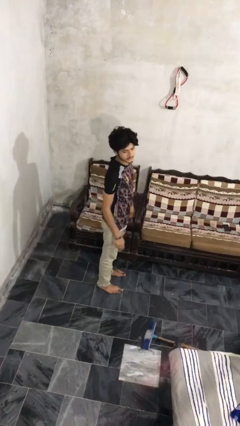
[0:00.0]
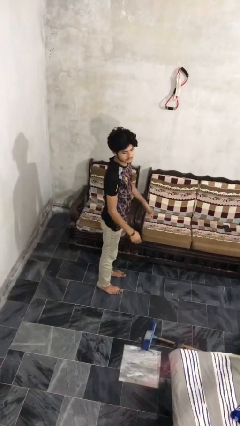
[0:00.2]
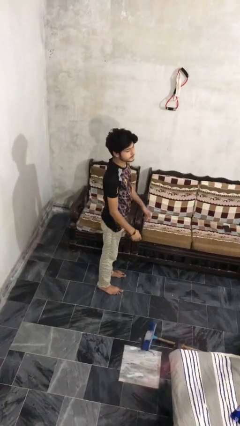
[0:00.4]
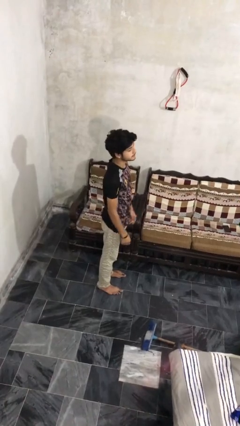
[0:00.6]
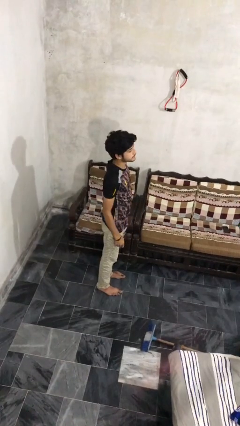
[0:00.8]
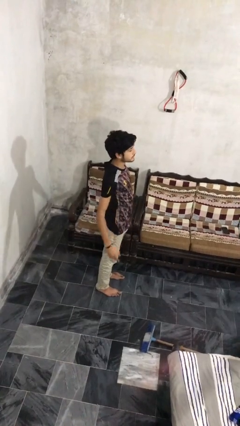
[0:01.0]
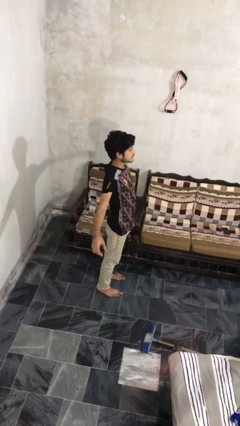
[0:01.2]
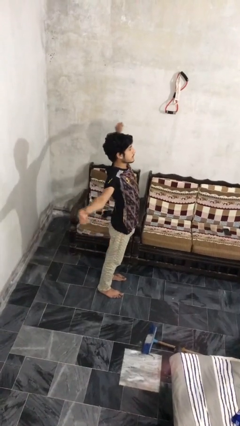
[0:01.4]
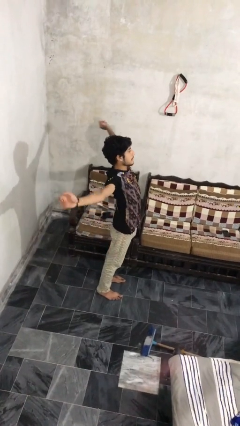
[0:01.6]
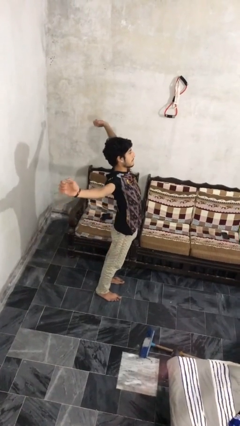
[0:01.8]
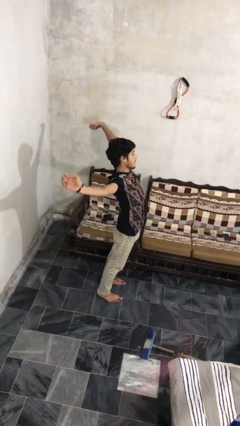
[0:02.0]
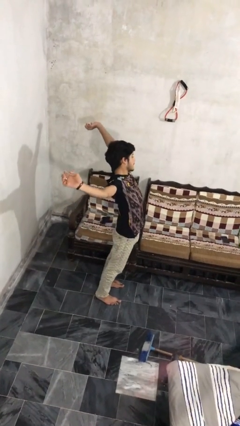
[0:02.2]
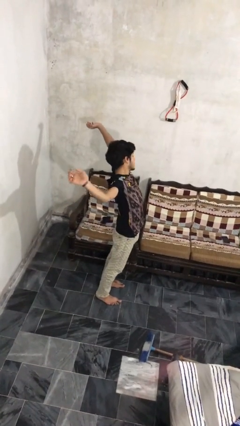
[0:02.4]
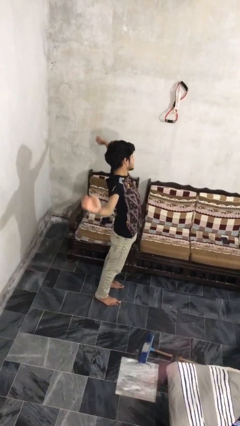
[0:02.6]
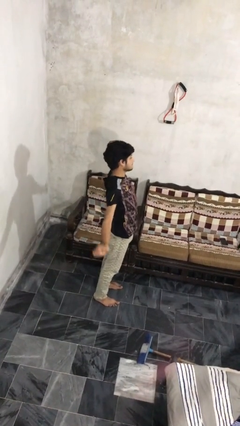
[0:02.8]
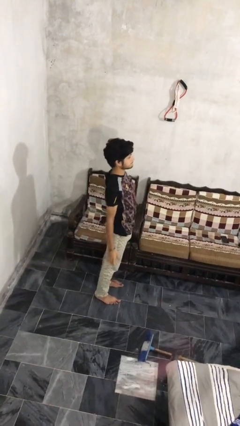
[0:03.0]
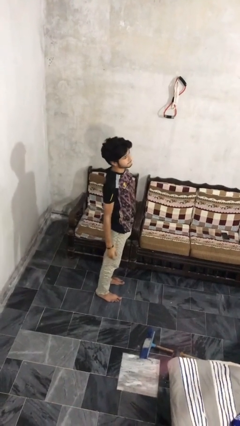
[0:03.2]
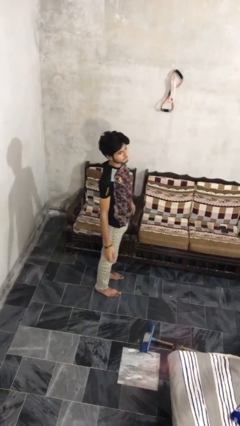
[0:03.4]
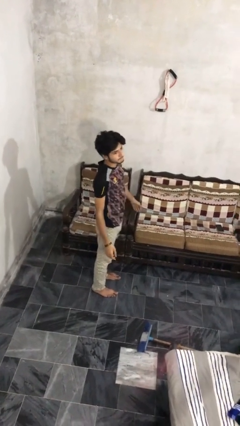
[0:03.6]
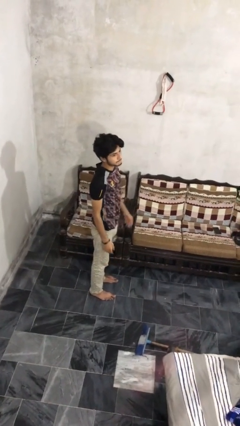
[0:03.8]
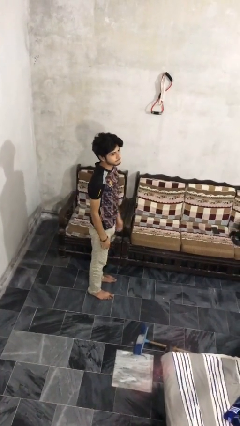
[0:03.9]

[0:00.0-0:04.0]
person stretches arms to side

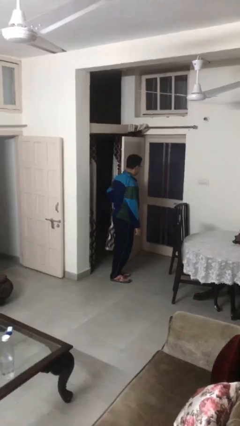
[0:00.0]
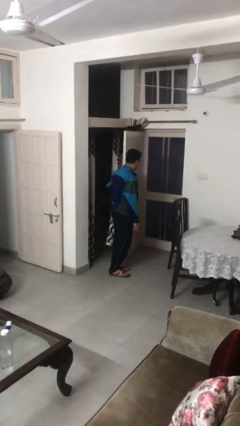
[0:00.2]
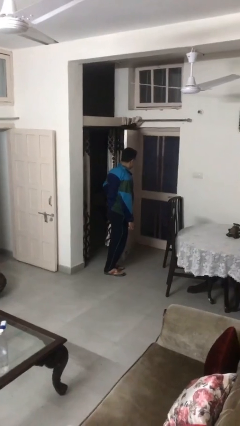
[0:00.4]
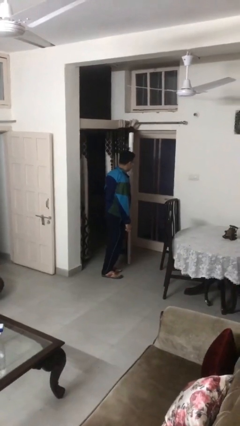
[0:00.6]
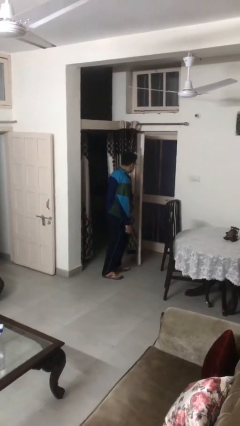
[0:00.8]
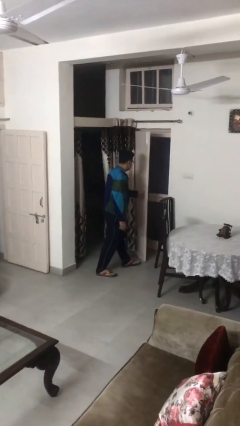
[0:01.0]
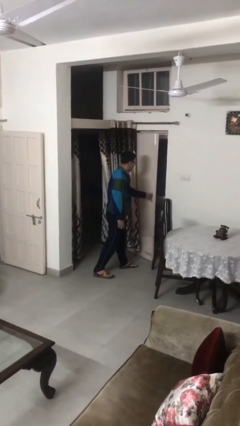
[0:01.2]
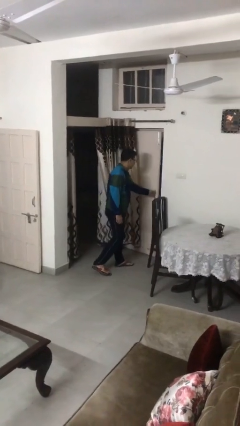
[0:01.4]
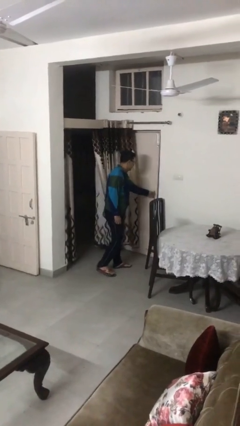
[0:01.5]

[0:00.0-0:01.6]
person closes facility door

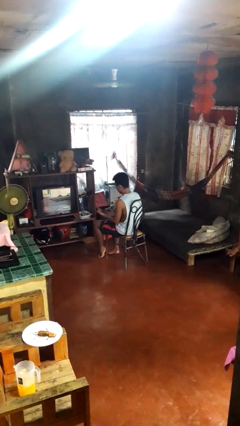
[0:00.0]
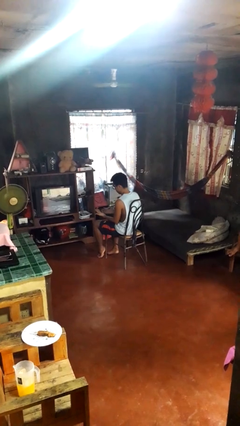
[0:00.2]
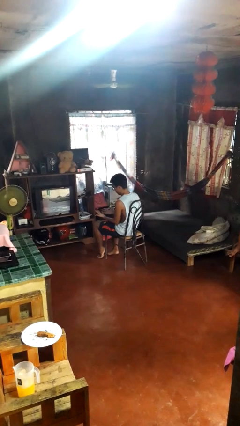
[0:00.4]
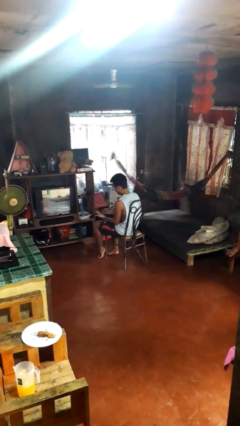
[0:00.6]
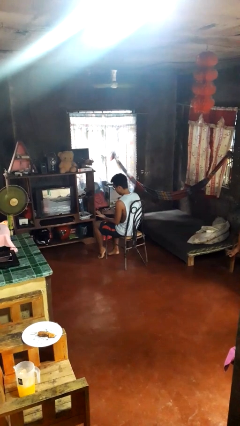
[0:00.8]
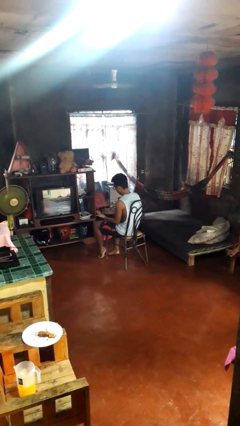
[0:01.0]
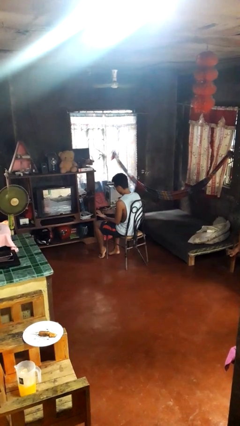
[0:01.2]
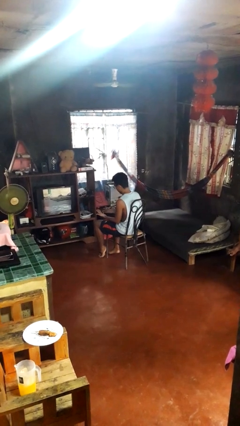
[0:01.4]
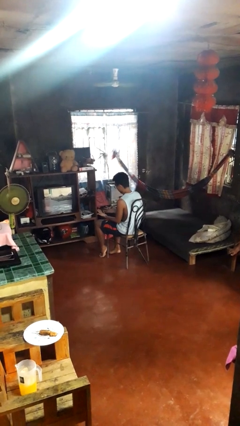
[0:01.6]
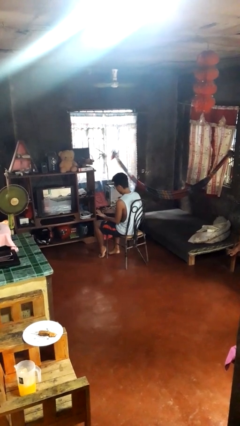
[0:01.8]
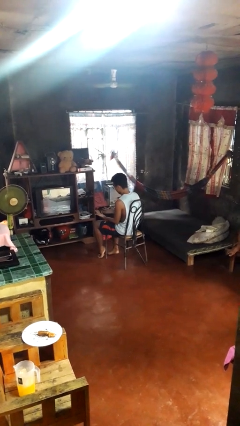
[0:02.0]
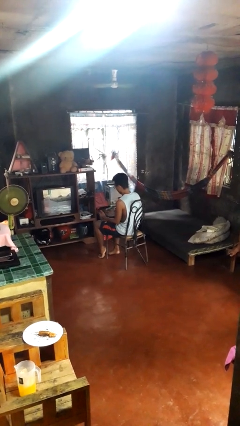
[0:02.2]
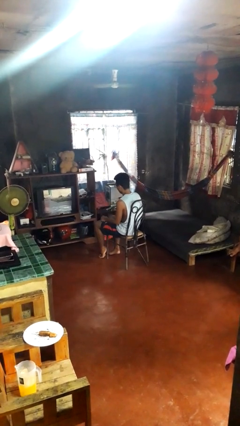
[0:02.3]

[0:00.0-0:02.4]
person looks at hands in lap

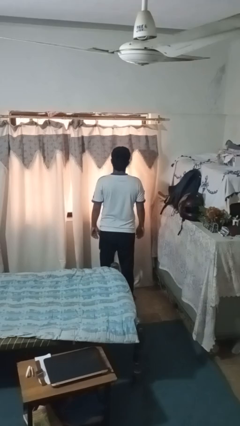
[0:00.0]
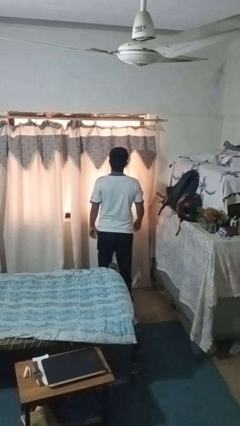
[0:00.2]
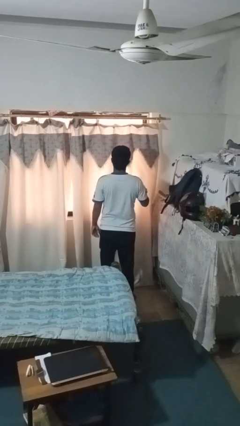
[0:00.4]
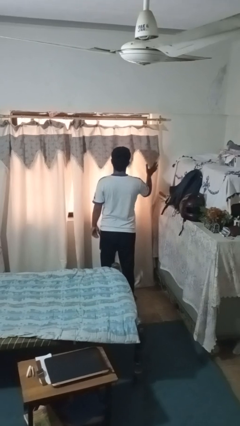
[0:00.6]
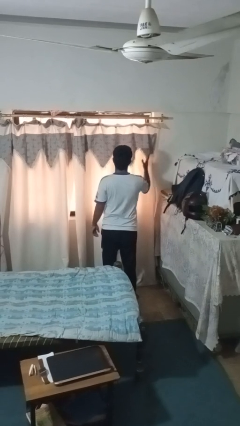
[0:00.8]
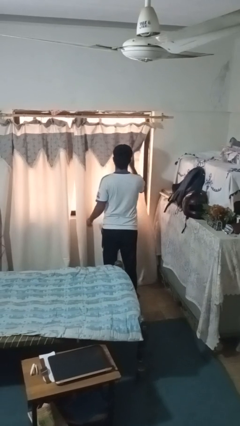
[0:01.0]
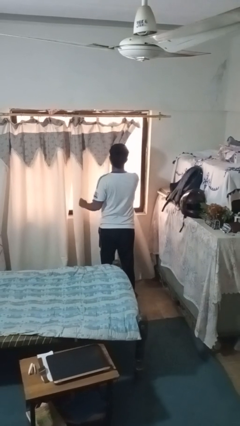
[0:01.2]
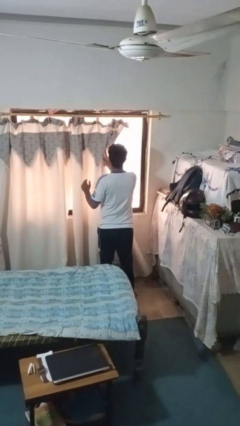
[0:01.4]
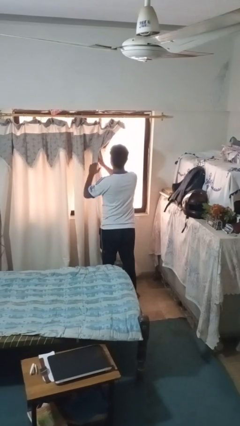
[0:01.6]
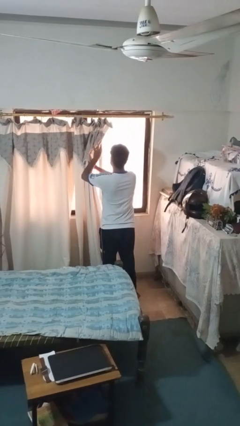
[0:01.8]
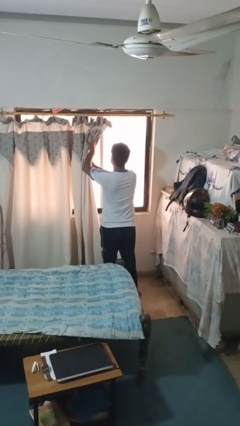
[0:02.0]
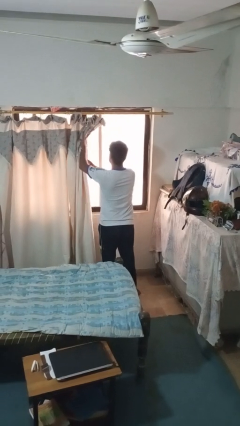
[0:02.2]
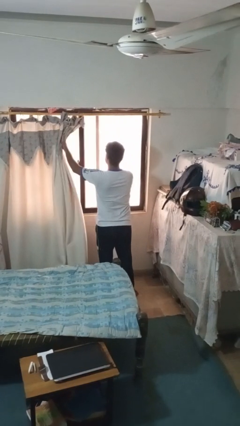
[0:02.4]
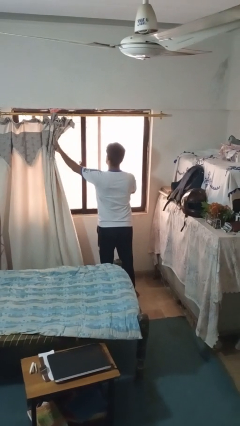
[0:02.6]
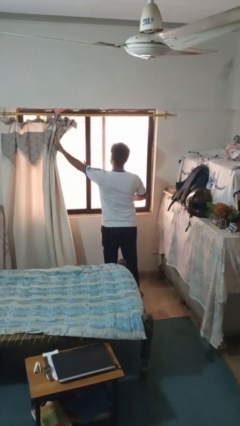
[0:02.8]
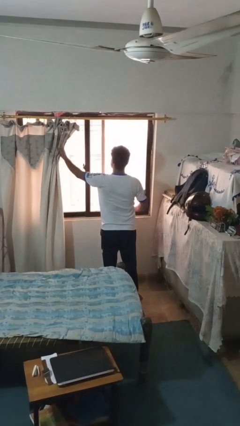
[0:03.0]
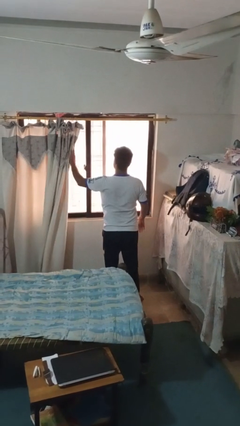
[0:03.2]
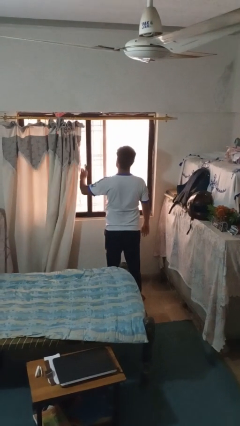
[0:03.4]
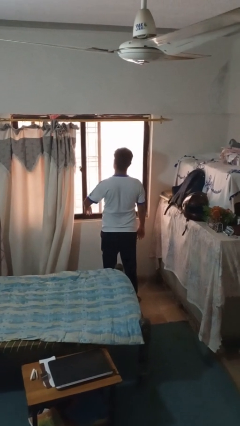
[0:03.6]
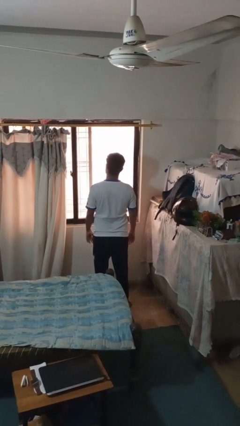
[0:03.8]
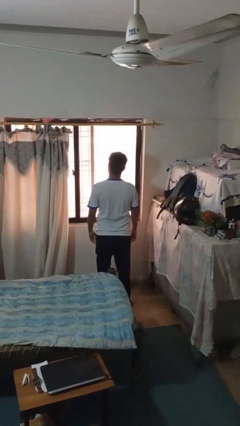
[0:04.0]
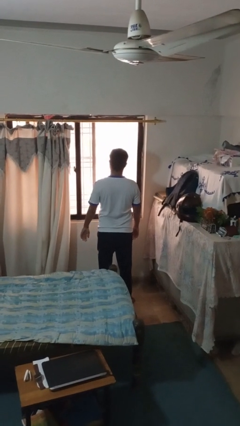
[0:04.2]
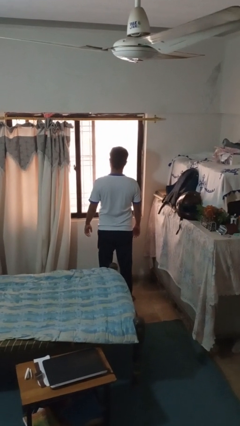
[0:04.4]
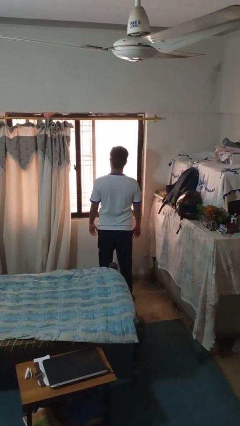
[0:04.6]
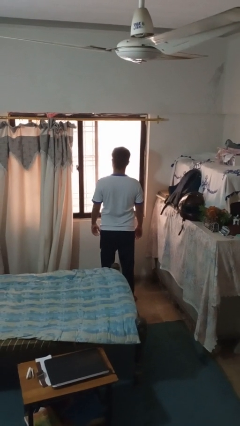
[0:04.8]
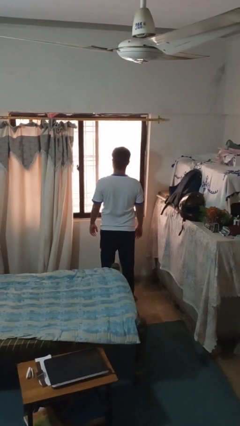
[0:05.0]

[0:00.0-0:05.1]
person opens curtains

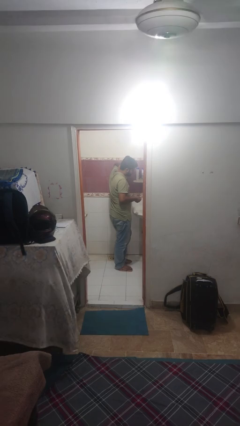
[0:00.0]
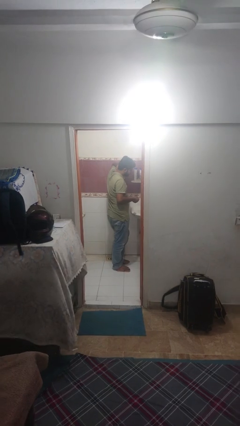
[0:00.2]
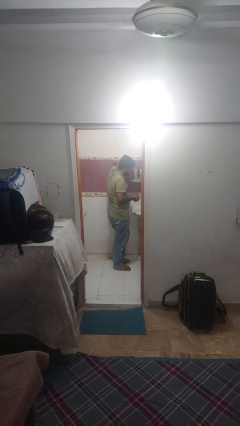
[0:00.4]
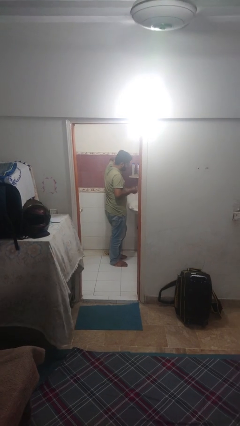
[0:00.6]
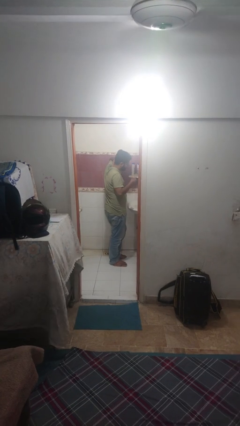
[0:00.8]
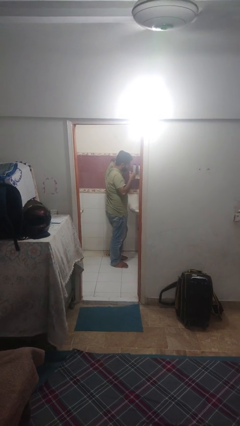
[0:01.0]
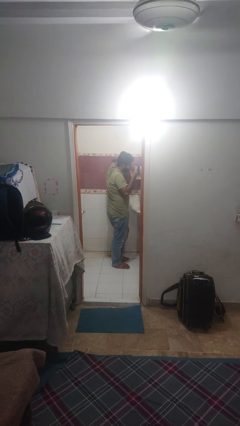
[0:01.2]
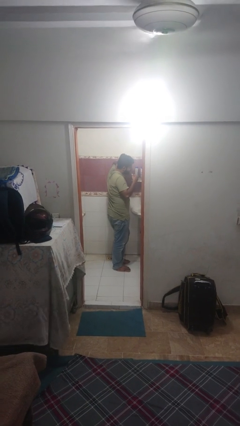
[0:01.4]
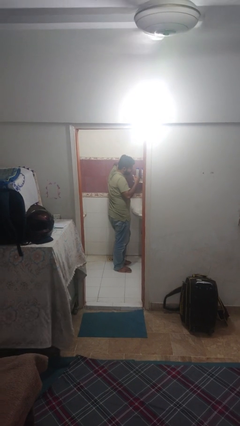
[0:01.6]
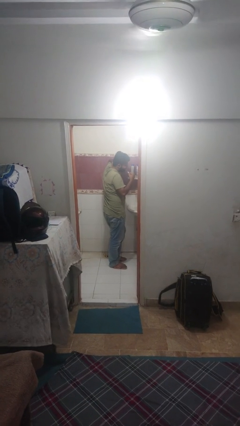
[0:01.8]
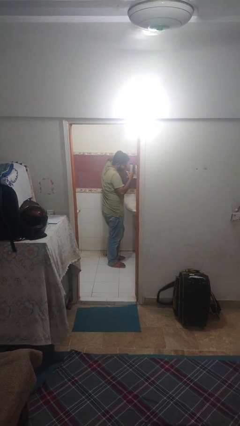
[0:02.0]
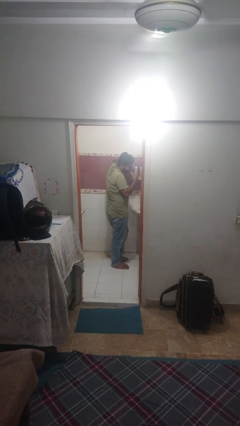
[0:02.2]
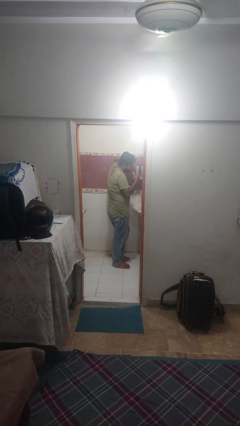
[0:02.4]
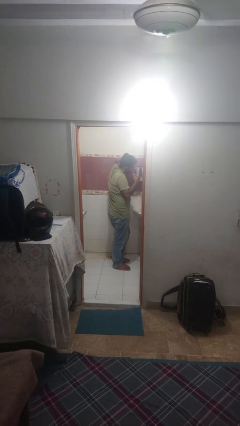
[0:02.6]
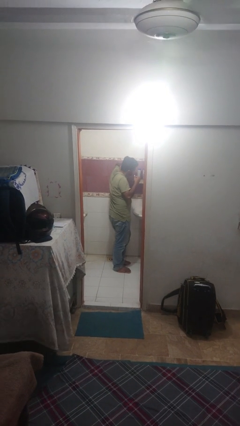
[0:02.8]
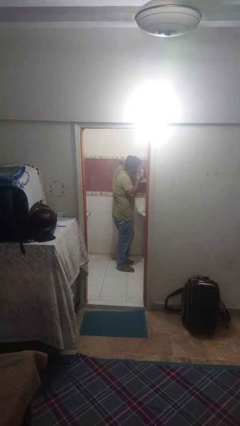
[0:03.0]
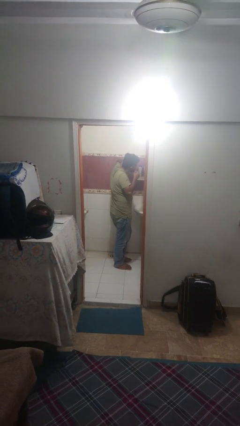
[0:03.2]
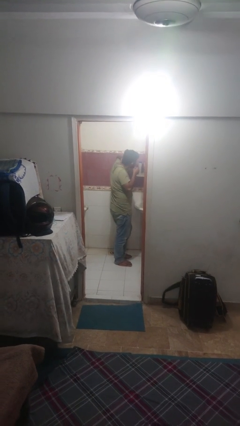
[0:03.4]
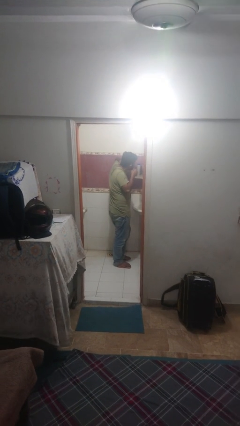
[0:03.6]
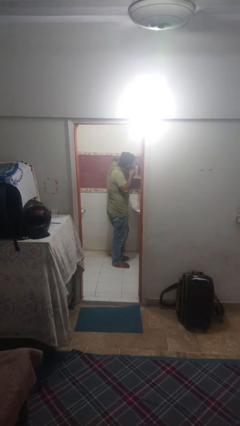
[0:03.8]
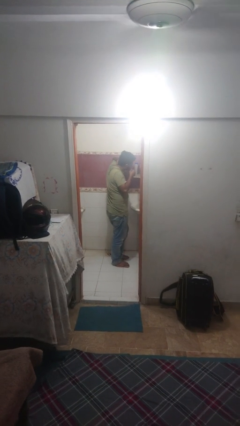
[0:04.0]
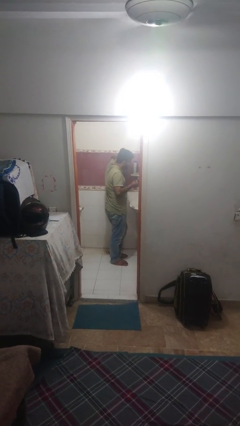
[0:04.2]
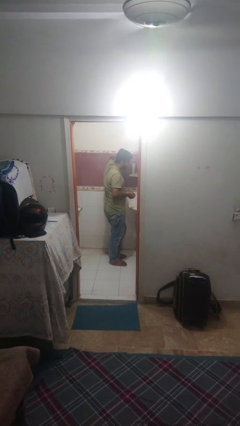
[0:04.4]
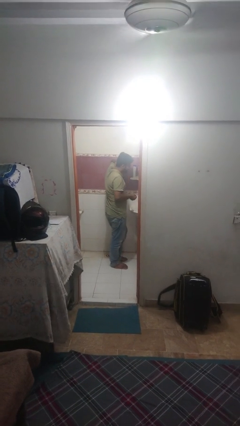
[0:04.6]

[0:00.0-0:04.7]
person brushes teeth

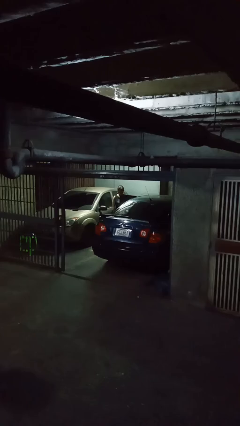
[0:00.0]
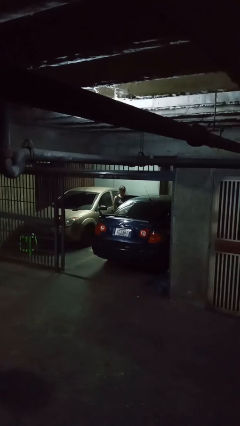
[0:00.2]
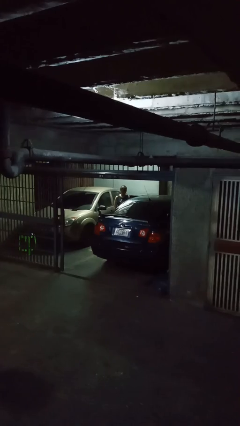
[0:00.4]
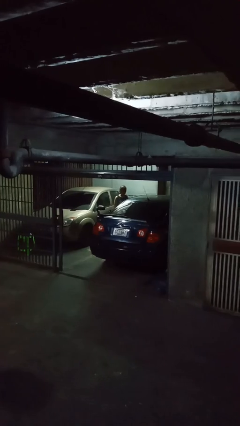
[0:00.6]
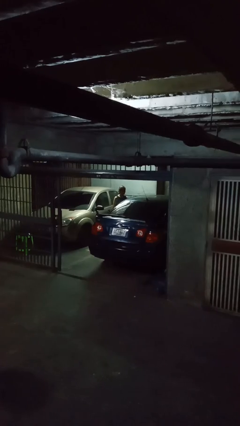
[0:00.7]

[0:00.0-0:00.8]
person closes car door
